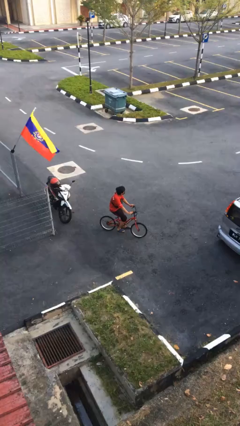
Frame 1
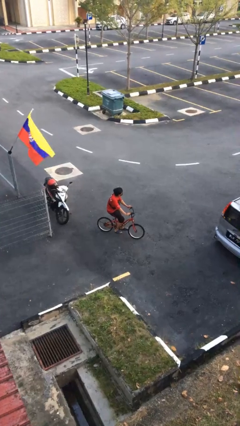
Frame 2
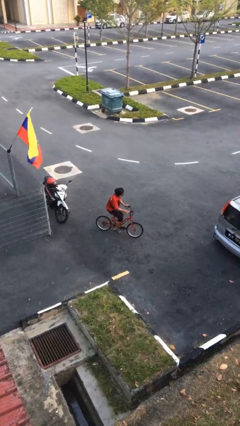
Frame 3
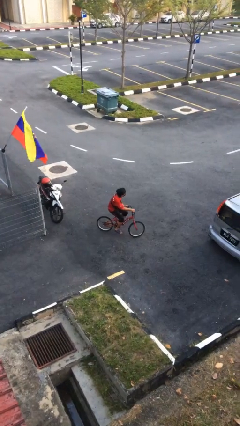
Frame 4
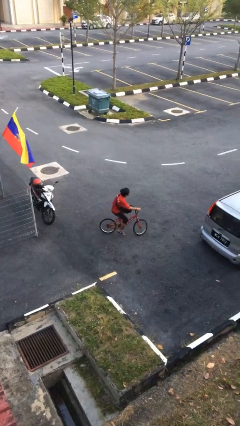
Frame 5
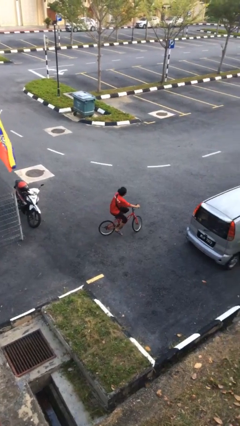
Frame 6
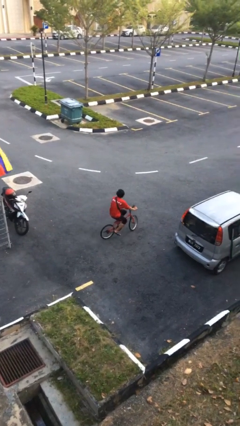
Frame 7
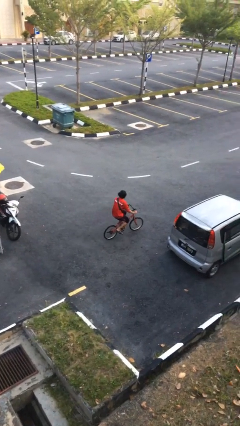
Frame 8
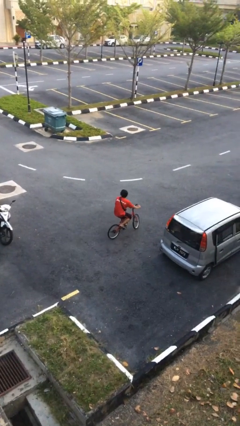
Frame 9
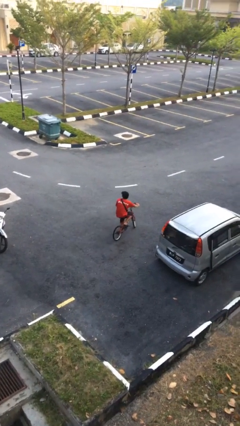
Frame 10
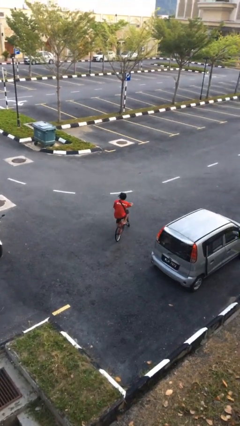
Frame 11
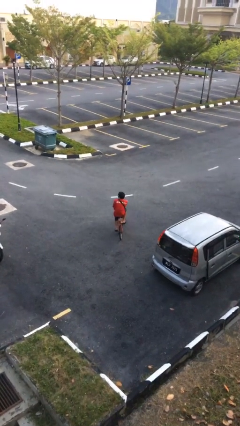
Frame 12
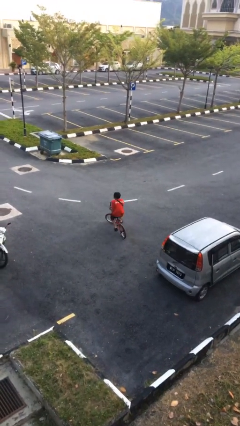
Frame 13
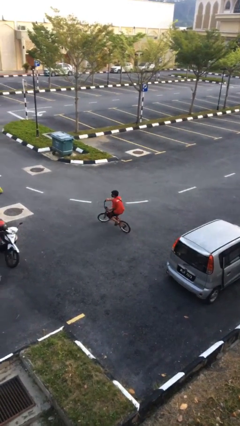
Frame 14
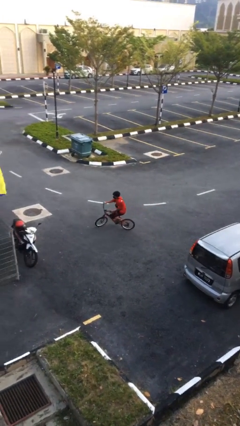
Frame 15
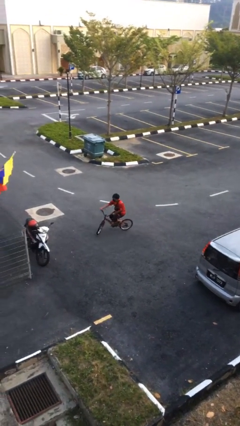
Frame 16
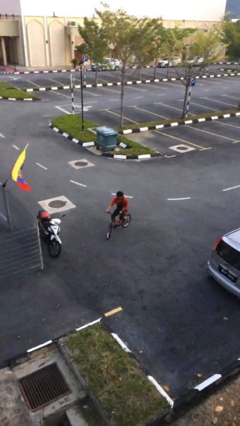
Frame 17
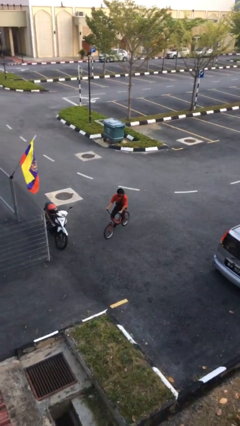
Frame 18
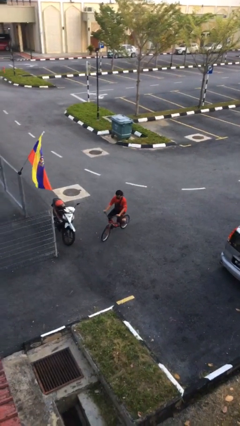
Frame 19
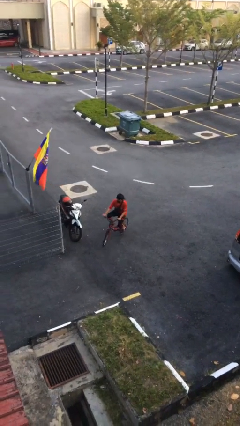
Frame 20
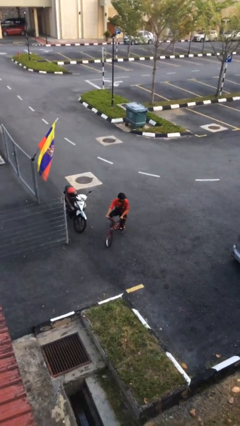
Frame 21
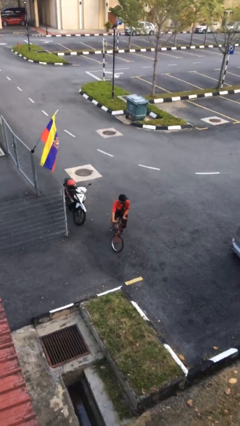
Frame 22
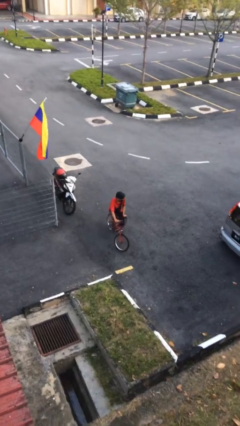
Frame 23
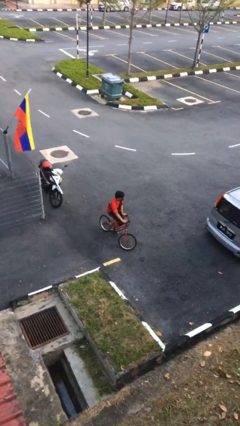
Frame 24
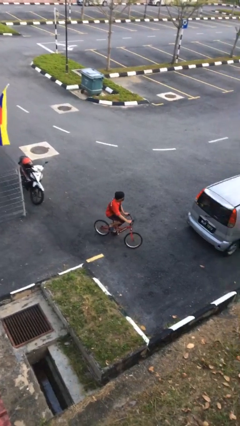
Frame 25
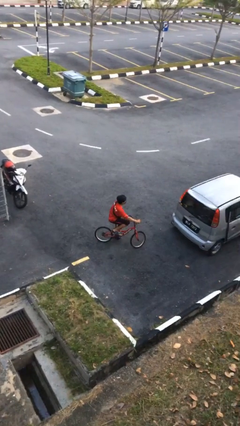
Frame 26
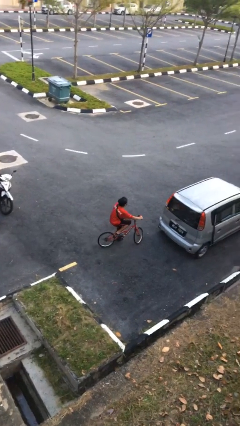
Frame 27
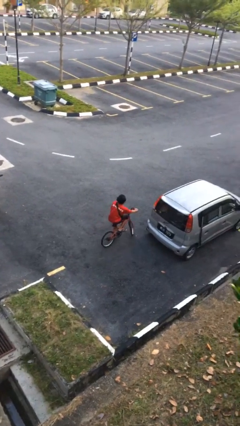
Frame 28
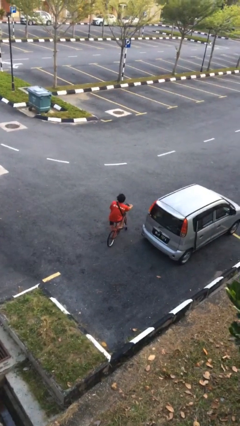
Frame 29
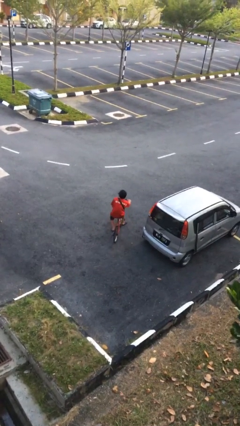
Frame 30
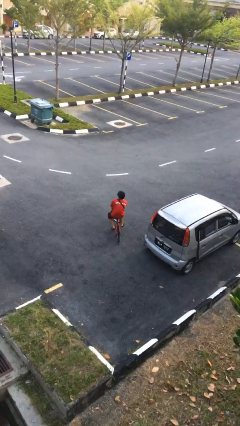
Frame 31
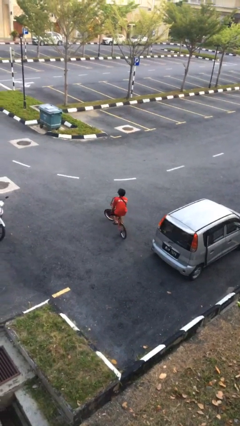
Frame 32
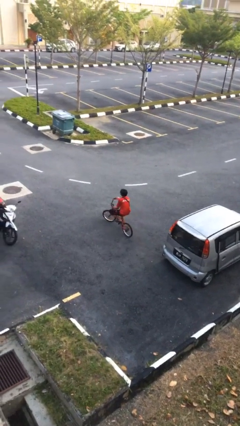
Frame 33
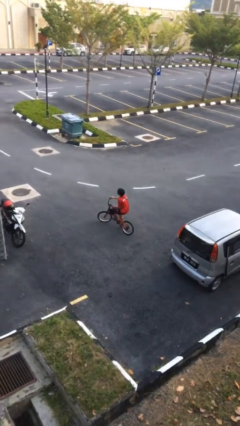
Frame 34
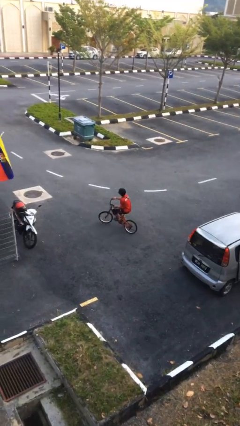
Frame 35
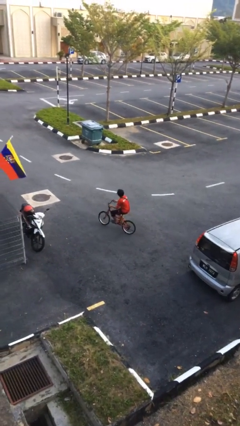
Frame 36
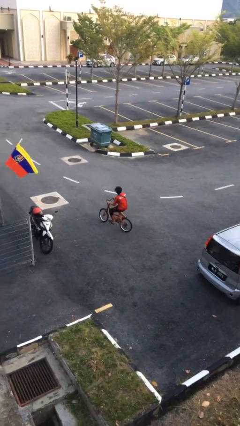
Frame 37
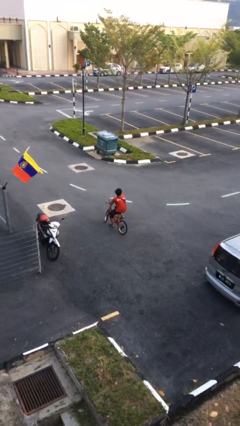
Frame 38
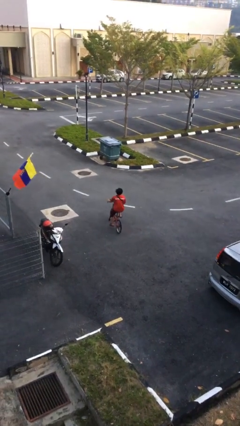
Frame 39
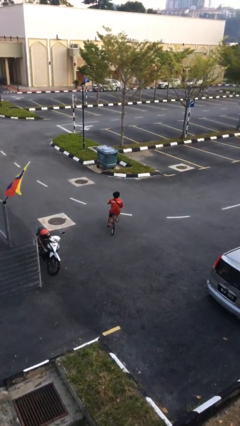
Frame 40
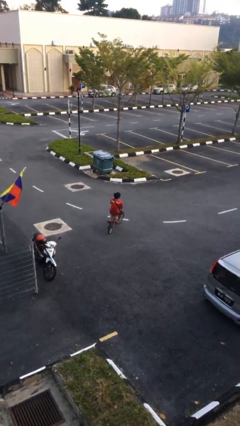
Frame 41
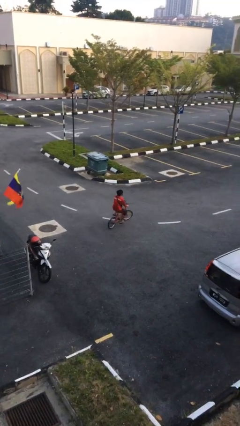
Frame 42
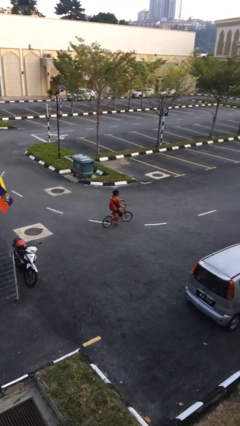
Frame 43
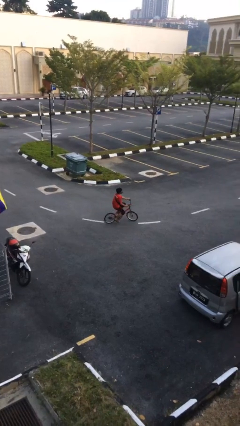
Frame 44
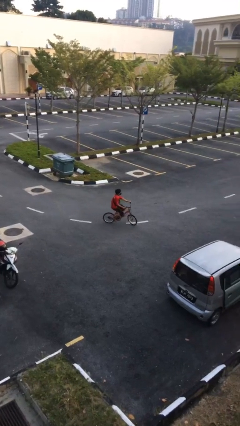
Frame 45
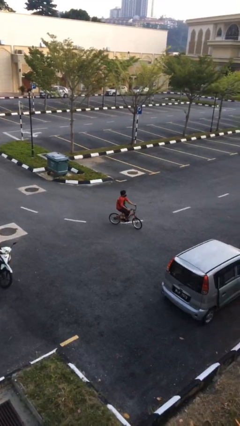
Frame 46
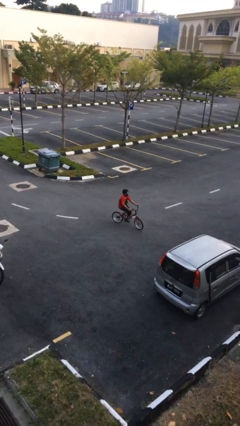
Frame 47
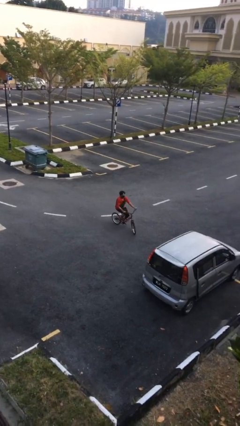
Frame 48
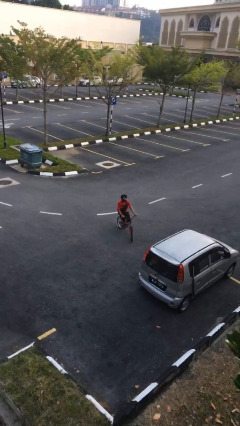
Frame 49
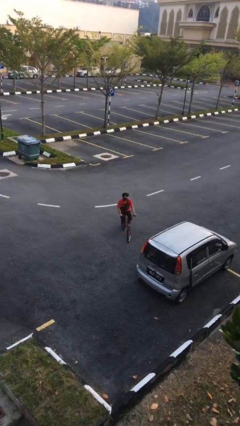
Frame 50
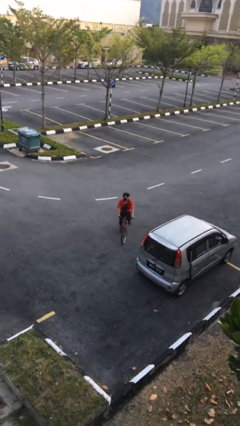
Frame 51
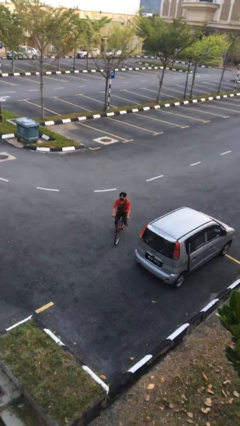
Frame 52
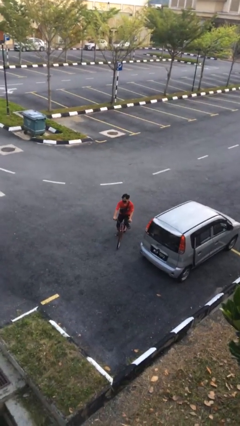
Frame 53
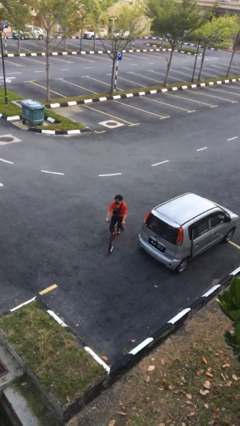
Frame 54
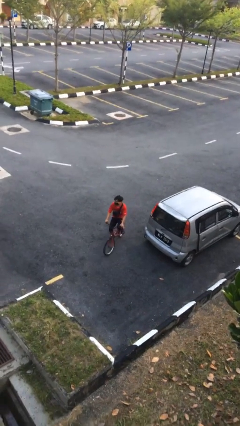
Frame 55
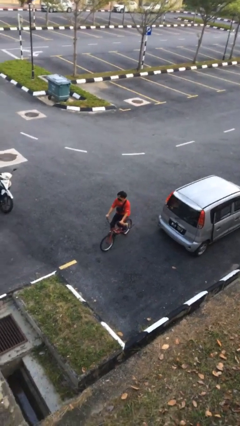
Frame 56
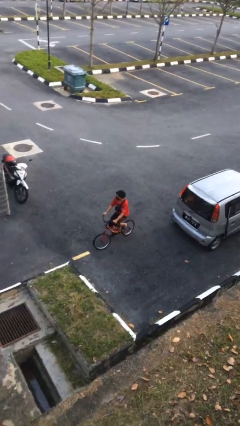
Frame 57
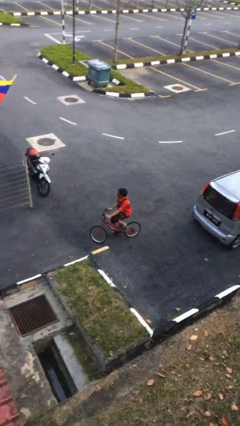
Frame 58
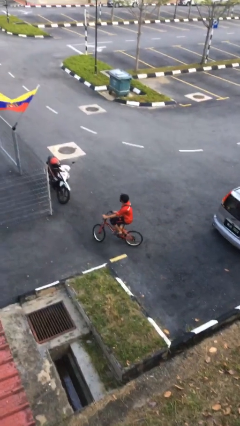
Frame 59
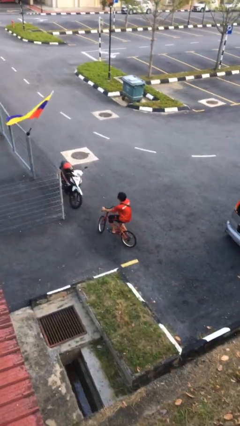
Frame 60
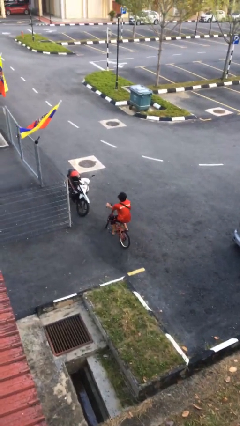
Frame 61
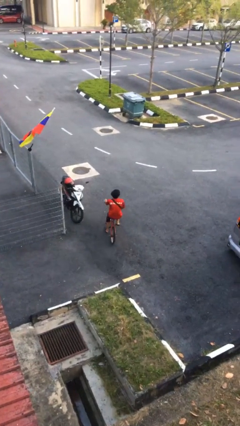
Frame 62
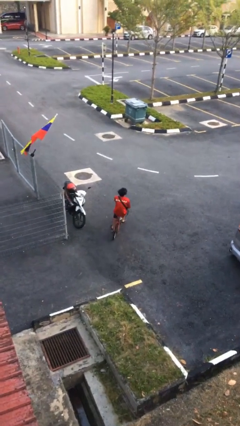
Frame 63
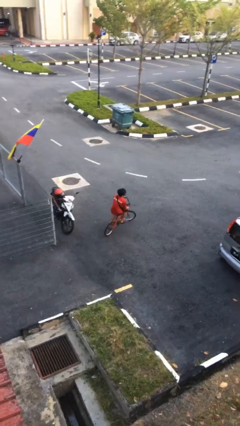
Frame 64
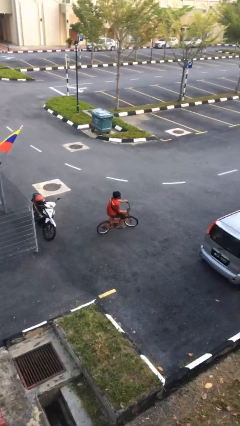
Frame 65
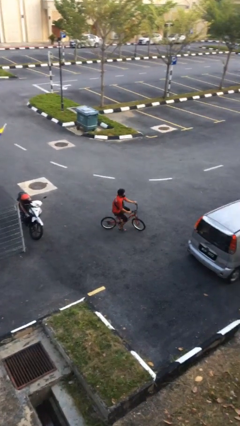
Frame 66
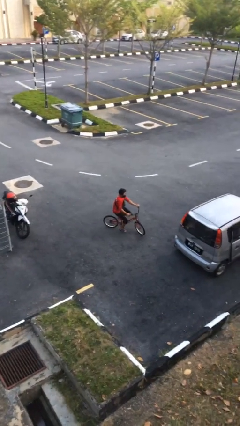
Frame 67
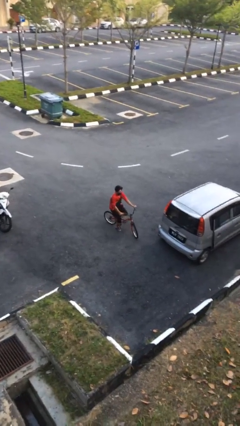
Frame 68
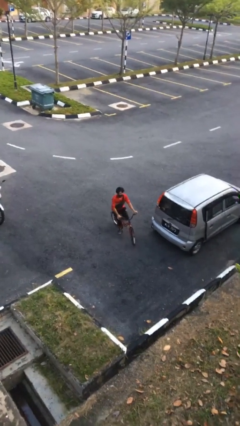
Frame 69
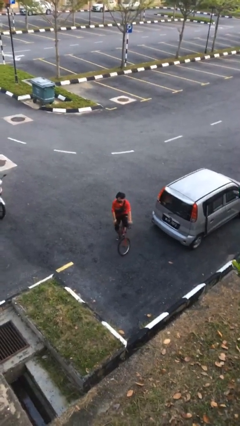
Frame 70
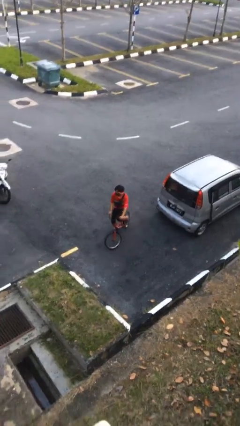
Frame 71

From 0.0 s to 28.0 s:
person rides bicycle

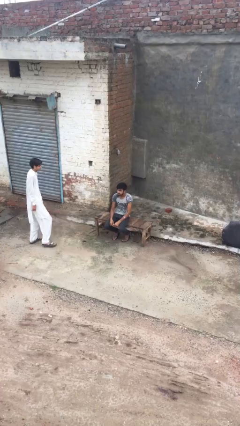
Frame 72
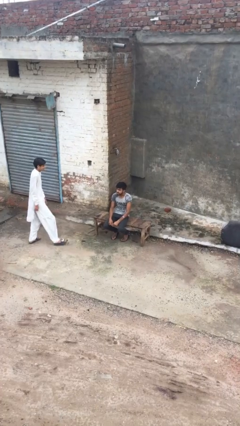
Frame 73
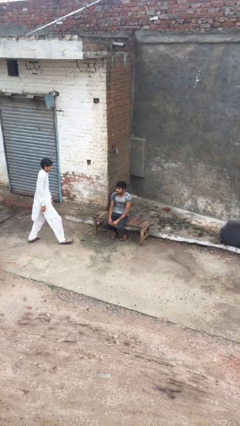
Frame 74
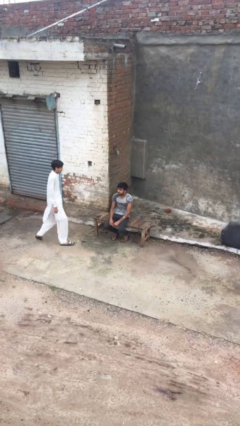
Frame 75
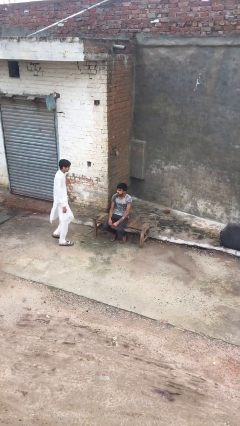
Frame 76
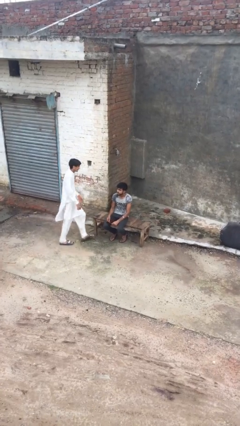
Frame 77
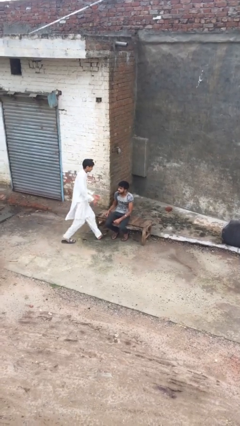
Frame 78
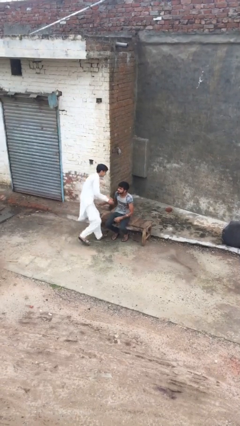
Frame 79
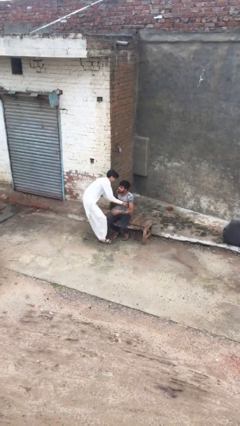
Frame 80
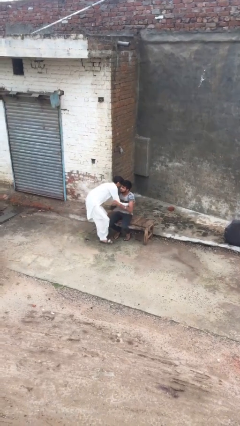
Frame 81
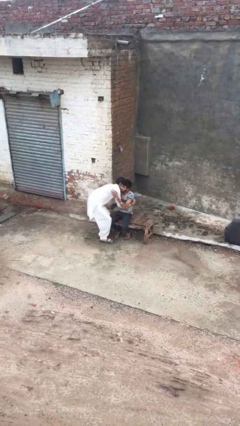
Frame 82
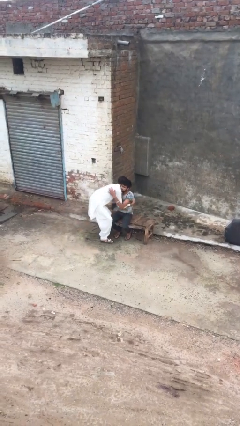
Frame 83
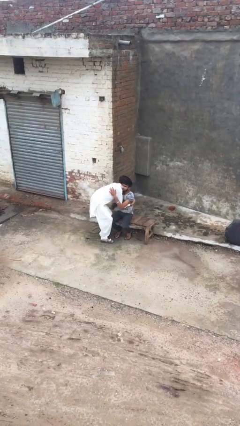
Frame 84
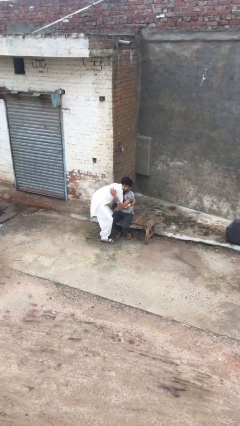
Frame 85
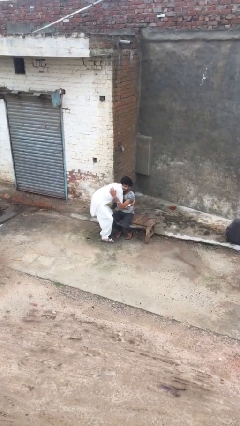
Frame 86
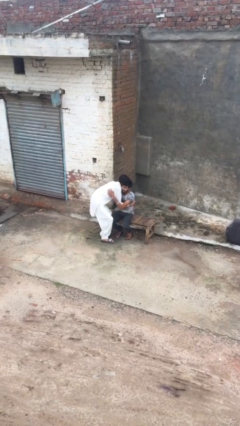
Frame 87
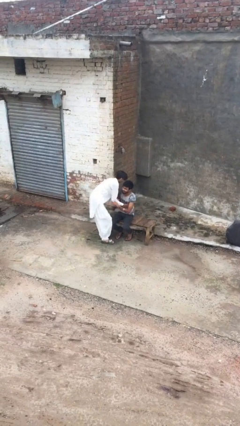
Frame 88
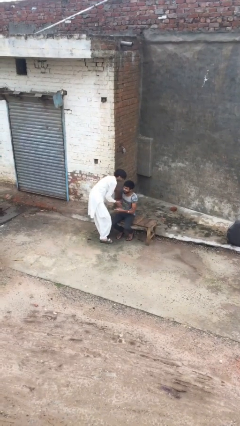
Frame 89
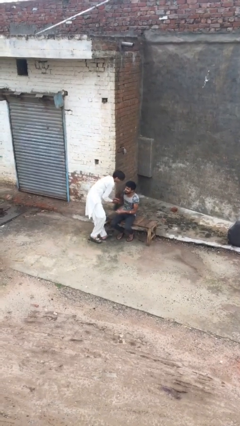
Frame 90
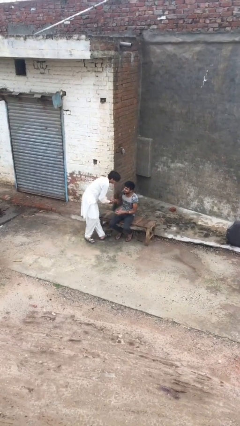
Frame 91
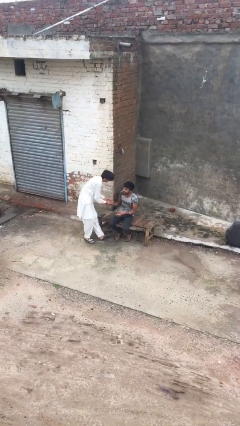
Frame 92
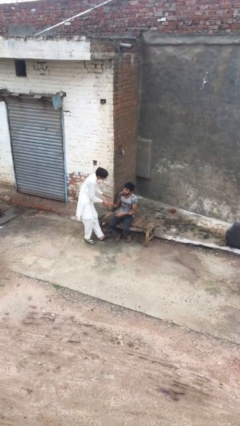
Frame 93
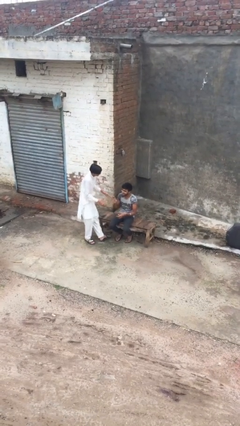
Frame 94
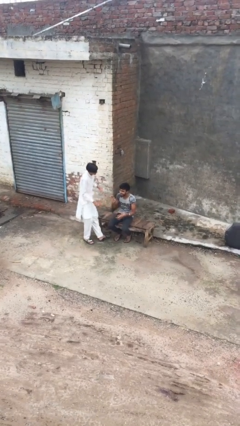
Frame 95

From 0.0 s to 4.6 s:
person embraces person
